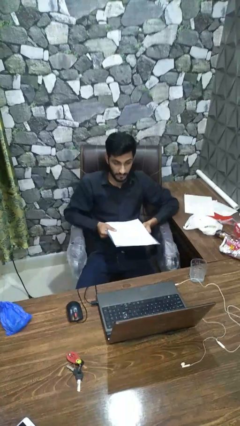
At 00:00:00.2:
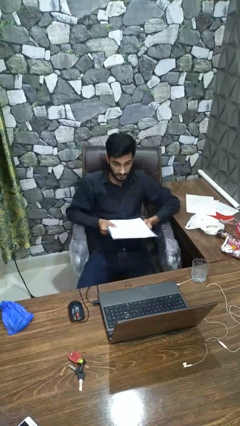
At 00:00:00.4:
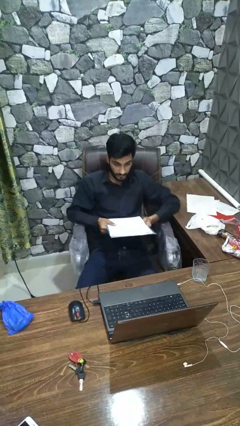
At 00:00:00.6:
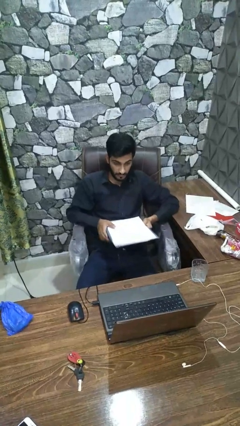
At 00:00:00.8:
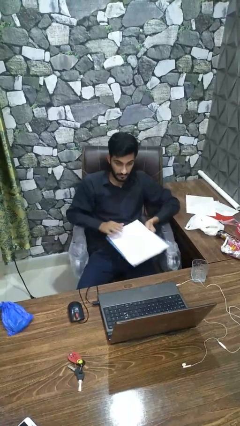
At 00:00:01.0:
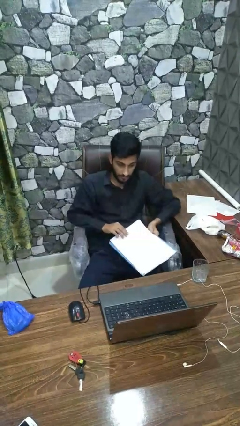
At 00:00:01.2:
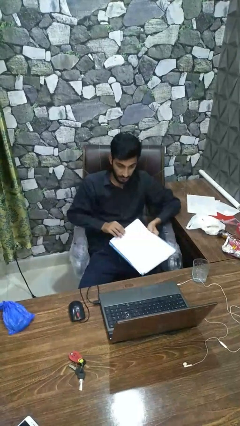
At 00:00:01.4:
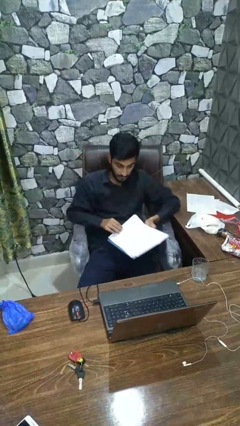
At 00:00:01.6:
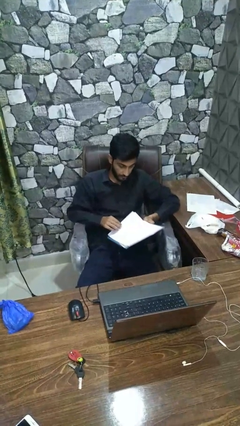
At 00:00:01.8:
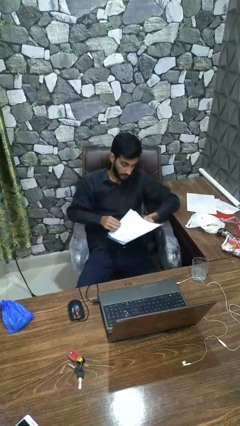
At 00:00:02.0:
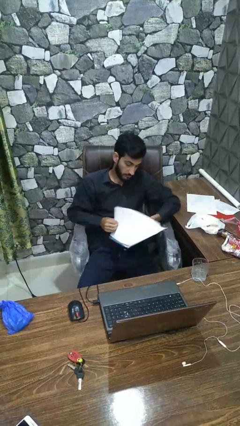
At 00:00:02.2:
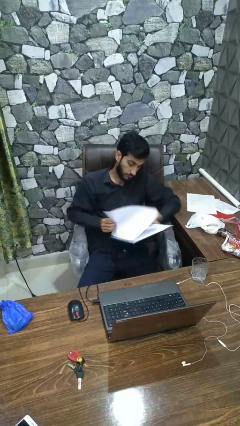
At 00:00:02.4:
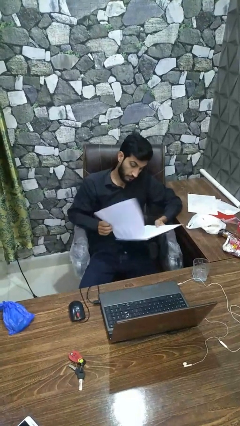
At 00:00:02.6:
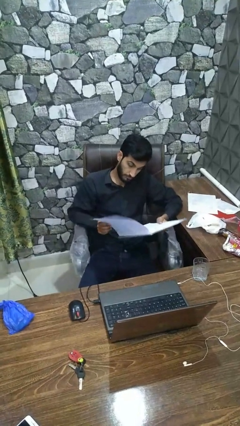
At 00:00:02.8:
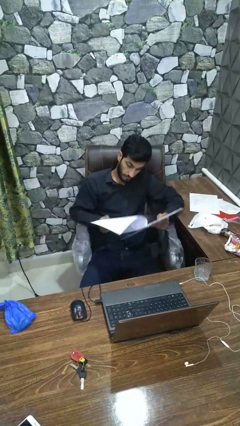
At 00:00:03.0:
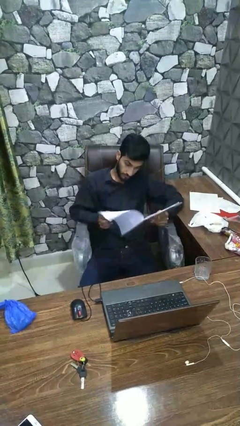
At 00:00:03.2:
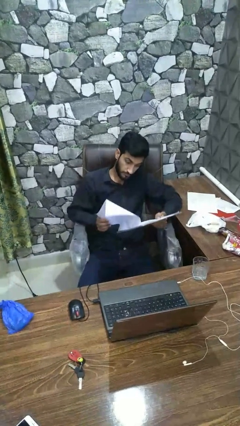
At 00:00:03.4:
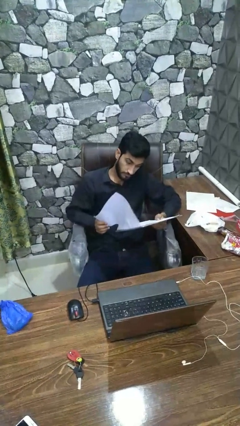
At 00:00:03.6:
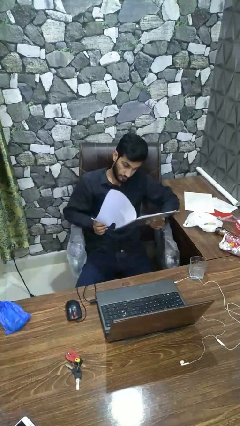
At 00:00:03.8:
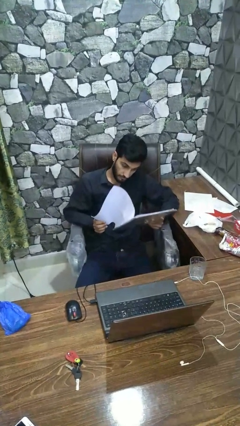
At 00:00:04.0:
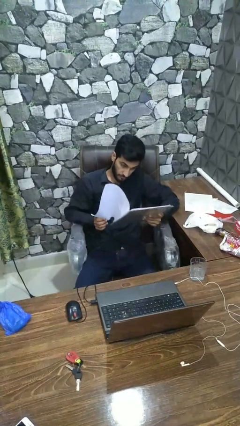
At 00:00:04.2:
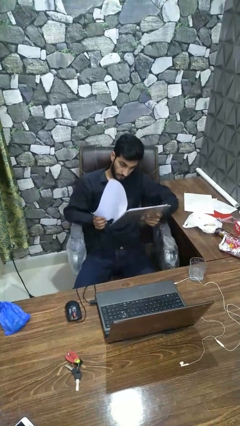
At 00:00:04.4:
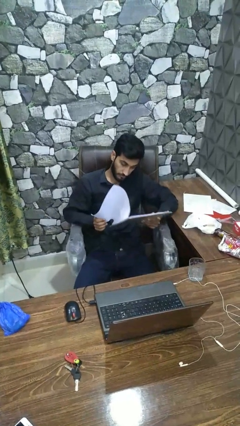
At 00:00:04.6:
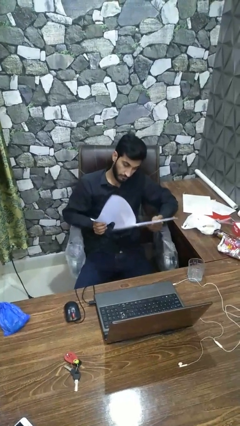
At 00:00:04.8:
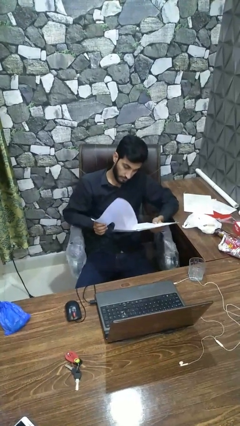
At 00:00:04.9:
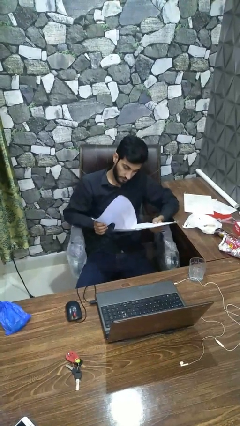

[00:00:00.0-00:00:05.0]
person reads book

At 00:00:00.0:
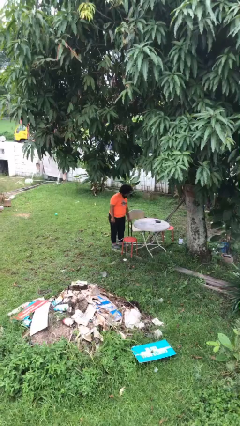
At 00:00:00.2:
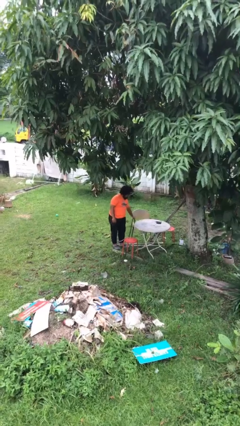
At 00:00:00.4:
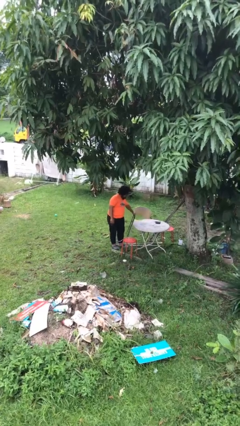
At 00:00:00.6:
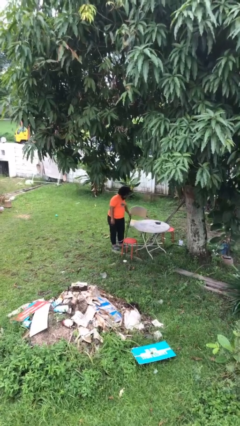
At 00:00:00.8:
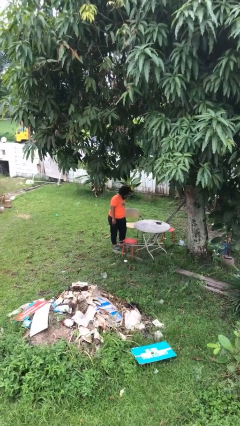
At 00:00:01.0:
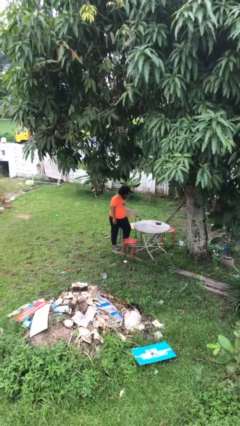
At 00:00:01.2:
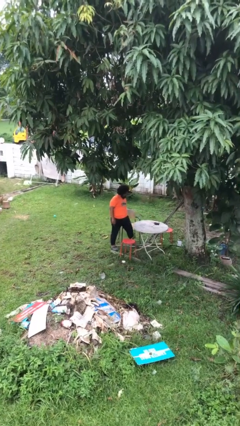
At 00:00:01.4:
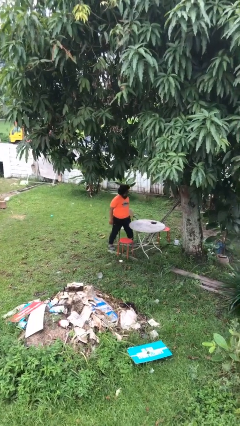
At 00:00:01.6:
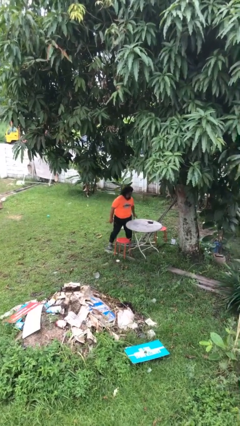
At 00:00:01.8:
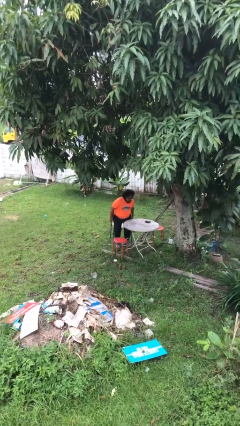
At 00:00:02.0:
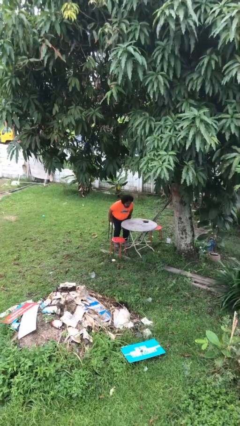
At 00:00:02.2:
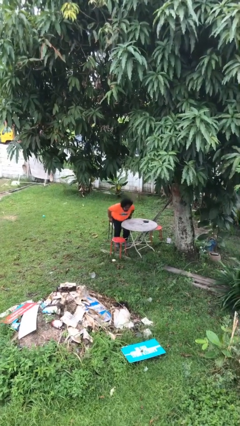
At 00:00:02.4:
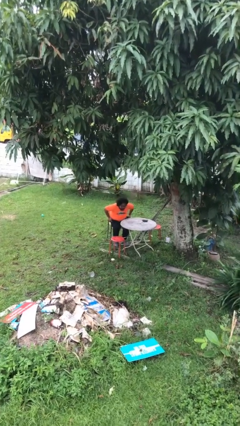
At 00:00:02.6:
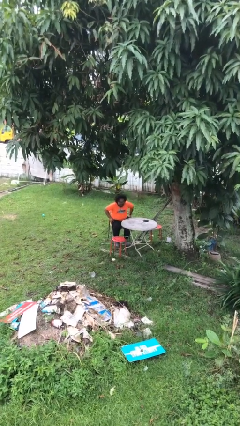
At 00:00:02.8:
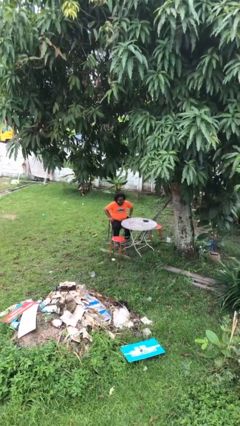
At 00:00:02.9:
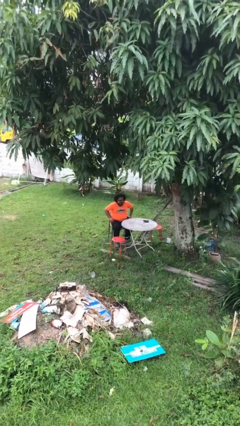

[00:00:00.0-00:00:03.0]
person sits down

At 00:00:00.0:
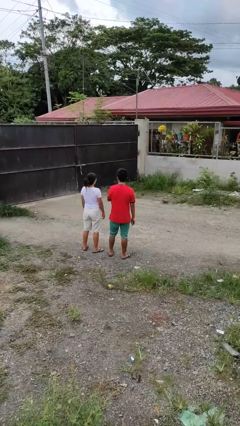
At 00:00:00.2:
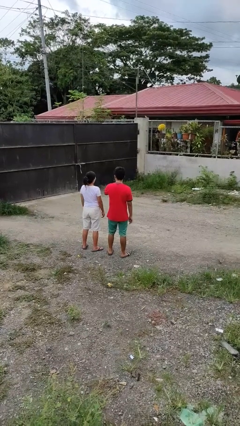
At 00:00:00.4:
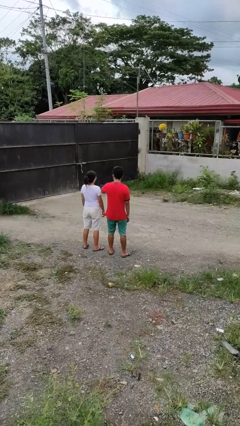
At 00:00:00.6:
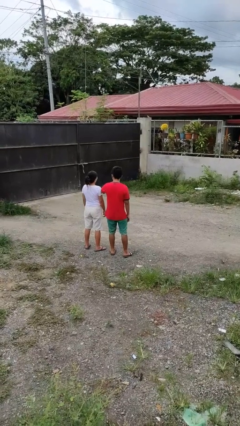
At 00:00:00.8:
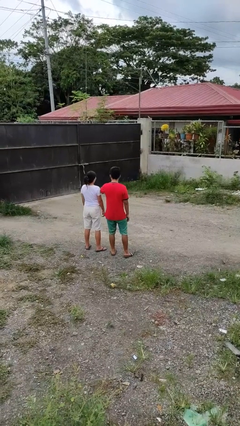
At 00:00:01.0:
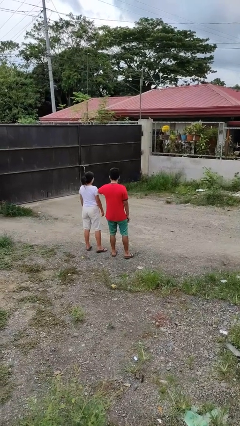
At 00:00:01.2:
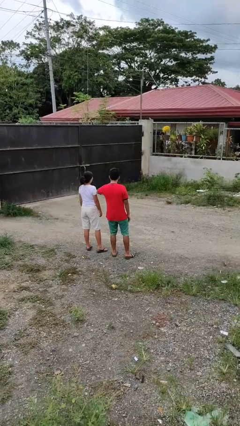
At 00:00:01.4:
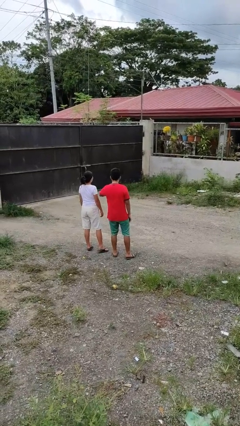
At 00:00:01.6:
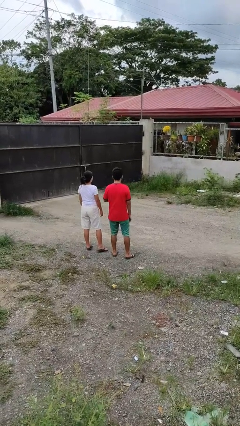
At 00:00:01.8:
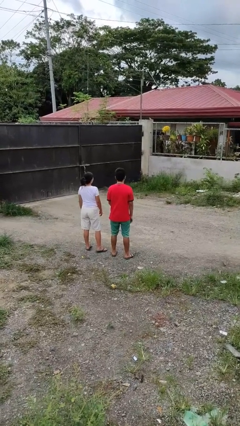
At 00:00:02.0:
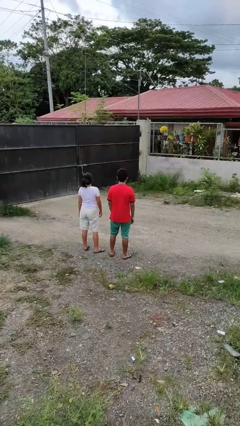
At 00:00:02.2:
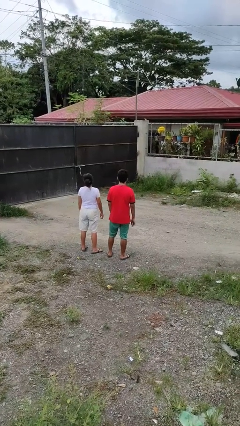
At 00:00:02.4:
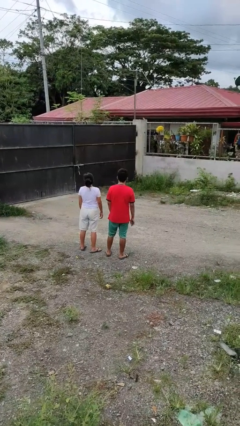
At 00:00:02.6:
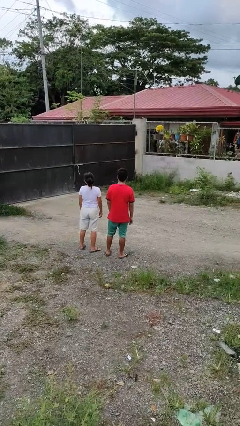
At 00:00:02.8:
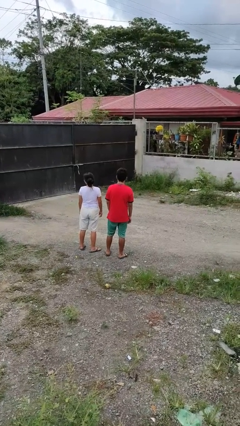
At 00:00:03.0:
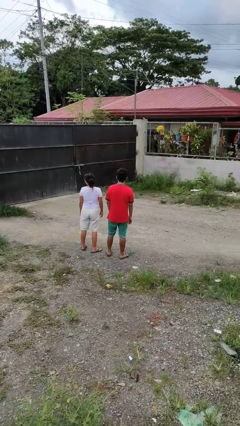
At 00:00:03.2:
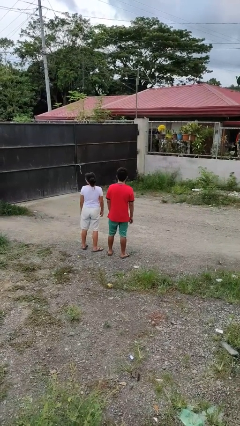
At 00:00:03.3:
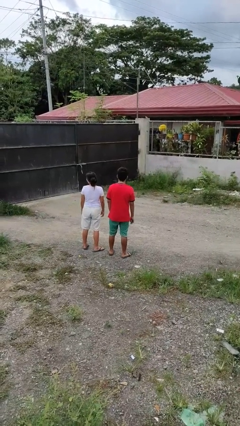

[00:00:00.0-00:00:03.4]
person nudges person with elbow

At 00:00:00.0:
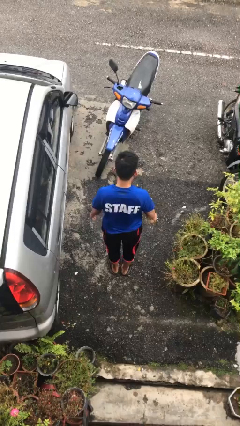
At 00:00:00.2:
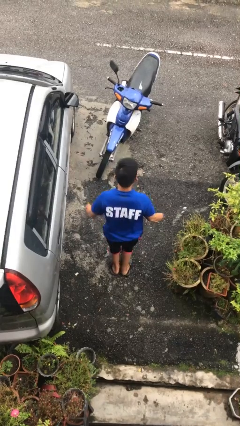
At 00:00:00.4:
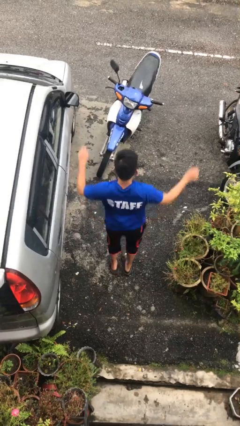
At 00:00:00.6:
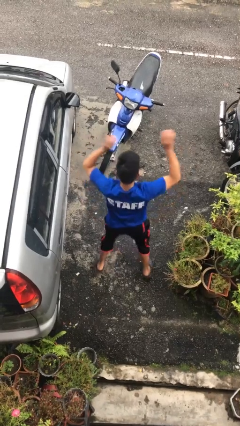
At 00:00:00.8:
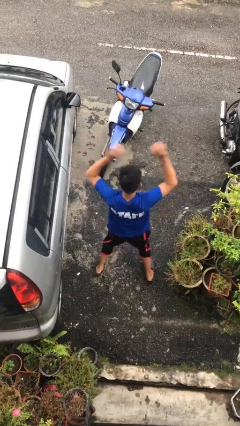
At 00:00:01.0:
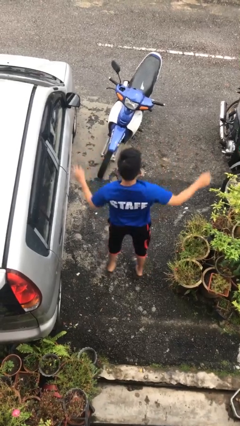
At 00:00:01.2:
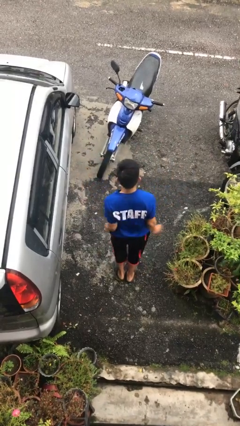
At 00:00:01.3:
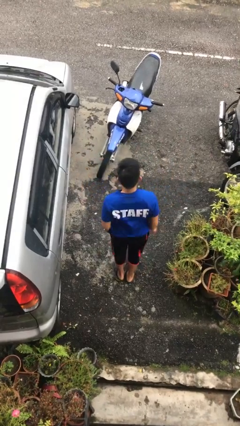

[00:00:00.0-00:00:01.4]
person exercises with jumping jacks

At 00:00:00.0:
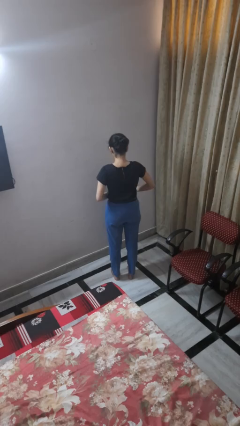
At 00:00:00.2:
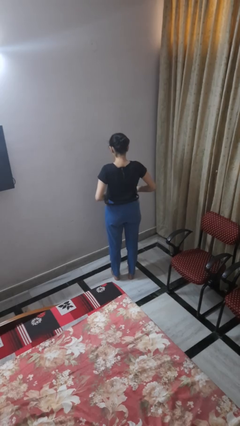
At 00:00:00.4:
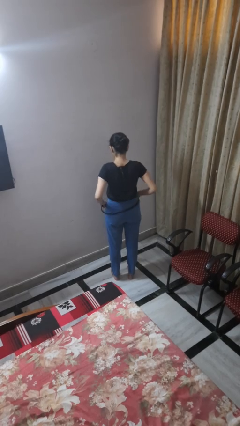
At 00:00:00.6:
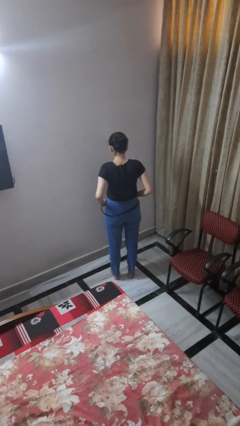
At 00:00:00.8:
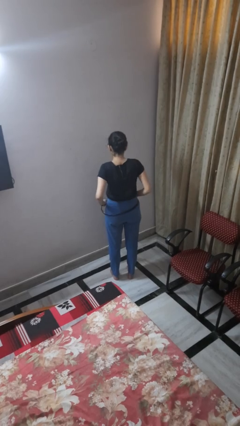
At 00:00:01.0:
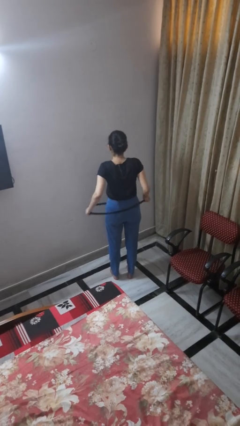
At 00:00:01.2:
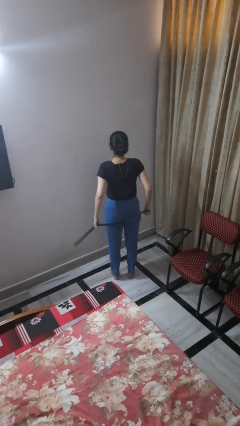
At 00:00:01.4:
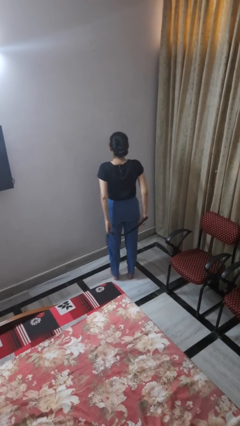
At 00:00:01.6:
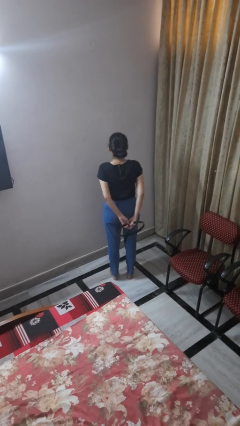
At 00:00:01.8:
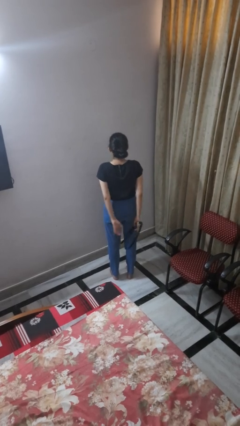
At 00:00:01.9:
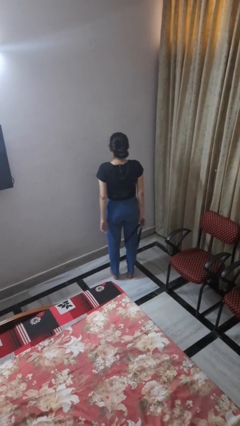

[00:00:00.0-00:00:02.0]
person takes off belt

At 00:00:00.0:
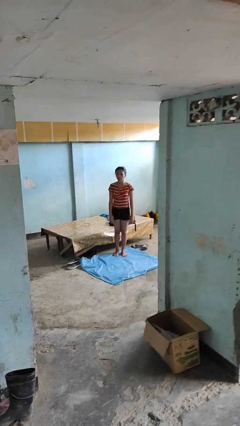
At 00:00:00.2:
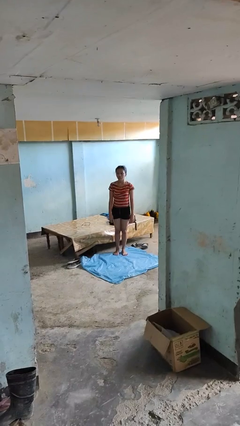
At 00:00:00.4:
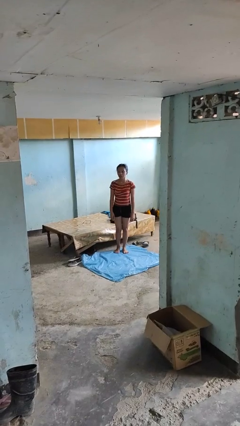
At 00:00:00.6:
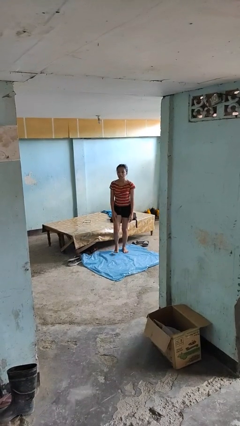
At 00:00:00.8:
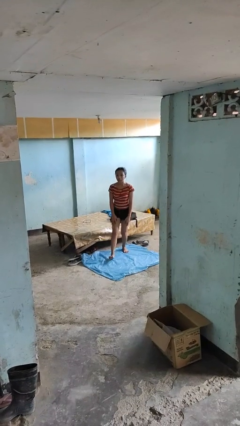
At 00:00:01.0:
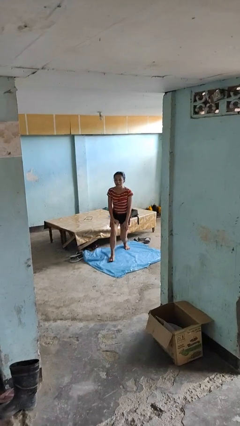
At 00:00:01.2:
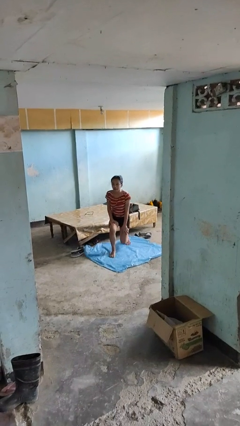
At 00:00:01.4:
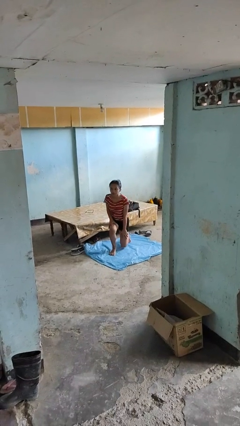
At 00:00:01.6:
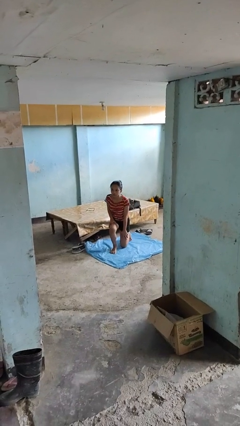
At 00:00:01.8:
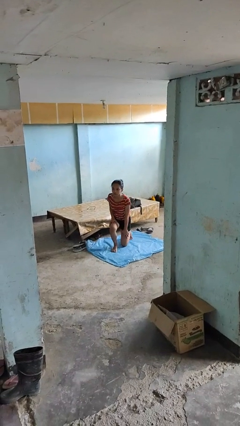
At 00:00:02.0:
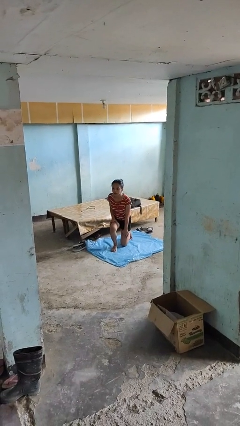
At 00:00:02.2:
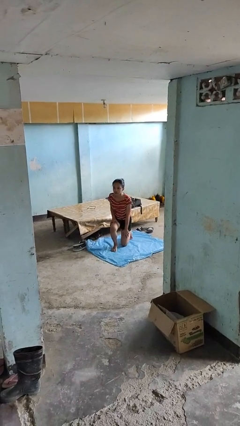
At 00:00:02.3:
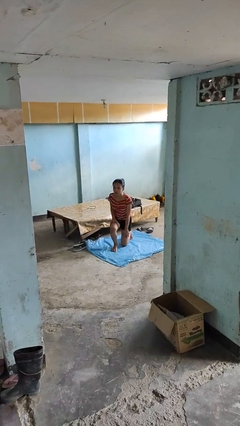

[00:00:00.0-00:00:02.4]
person kneels

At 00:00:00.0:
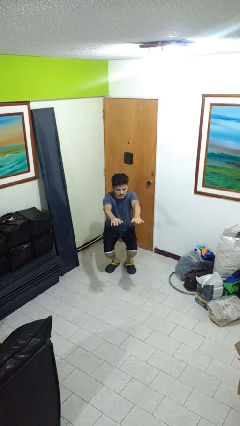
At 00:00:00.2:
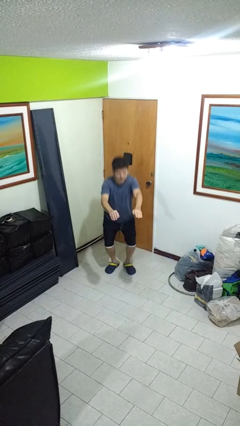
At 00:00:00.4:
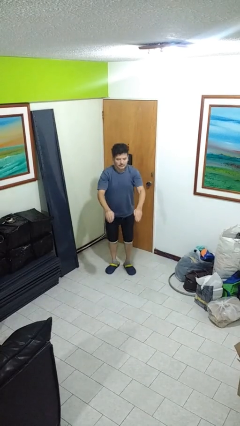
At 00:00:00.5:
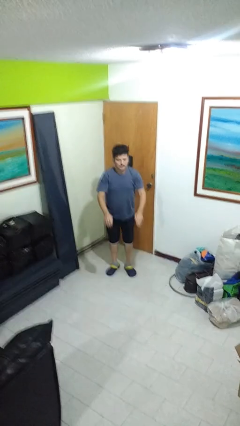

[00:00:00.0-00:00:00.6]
person stands up
